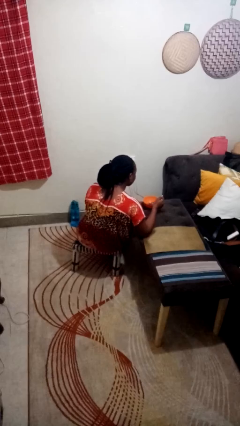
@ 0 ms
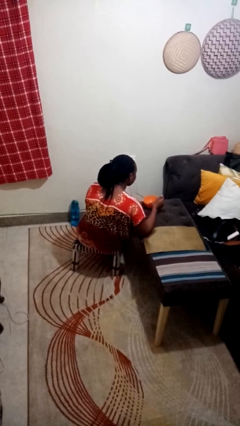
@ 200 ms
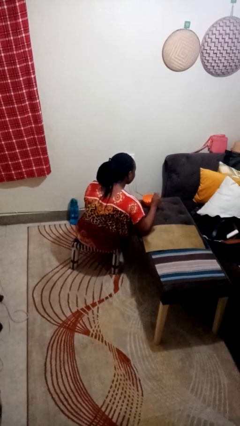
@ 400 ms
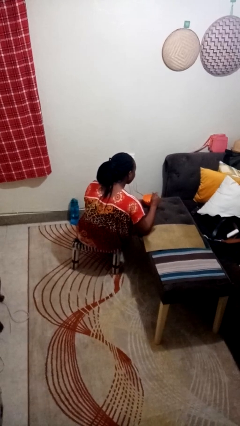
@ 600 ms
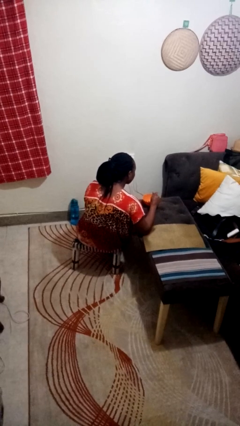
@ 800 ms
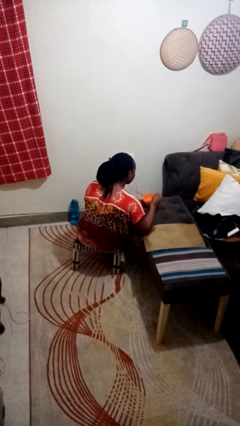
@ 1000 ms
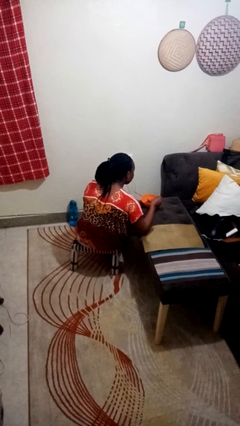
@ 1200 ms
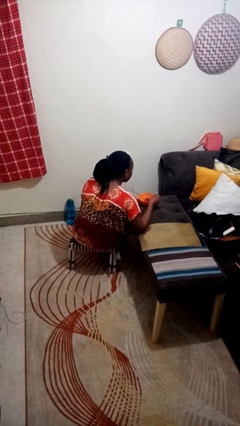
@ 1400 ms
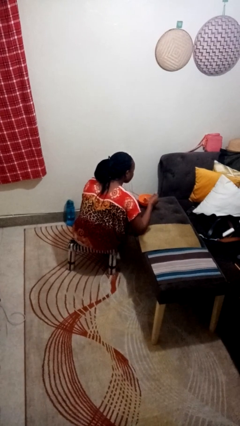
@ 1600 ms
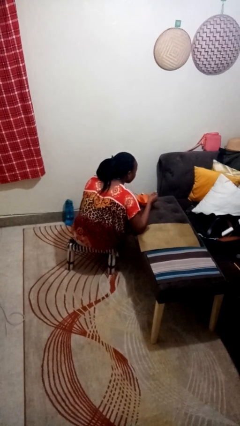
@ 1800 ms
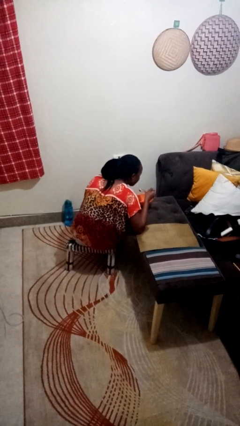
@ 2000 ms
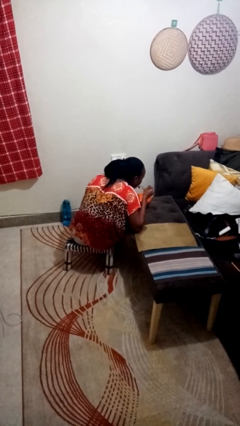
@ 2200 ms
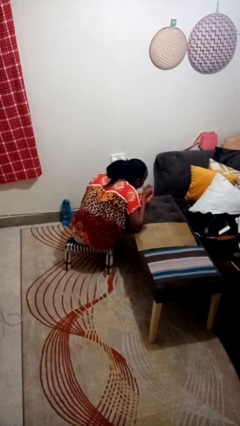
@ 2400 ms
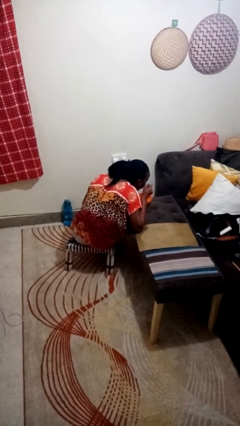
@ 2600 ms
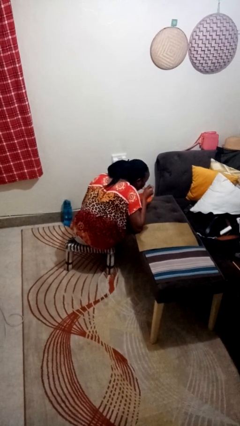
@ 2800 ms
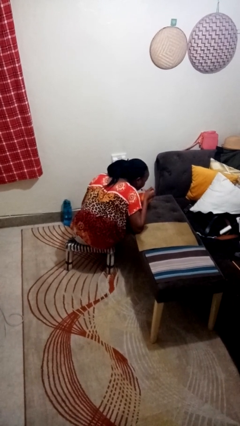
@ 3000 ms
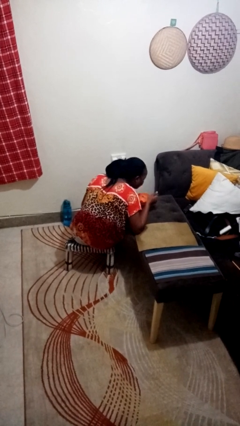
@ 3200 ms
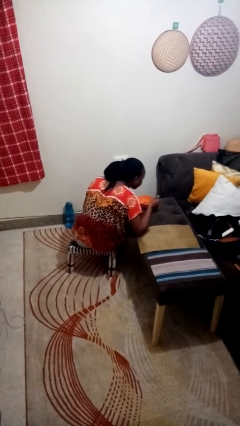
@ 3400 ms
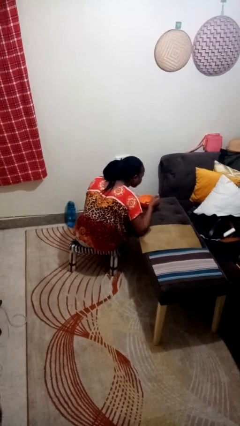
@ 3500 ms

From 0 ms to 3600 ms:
person eats with utensil

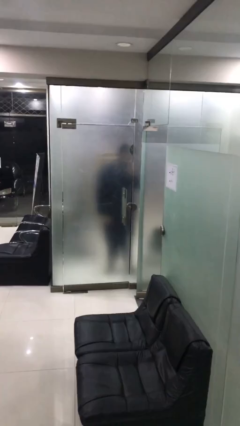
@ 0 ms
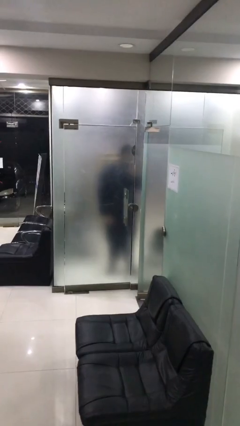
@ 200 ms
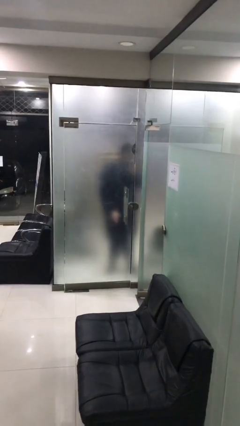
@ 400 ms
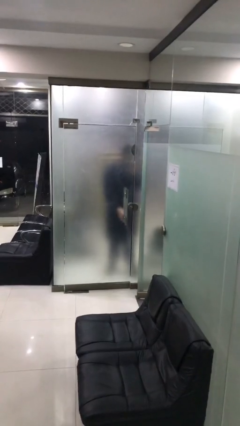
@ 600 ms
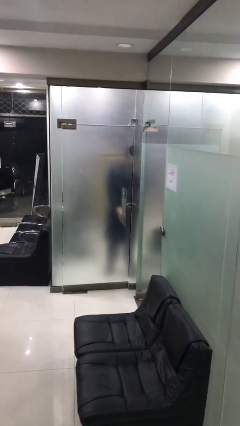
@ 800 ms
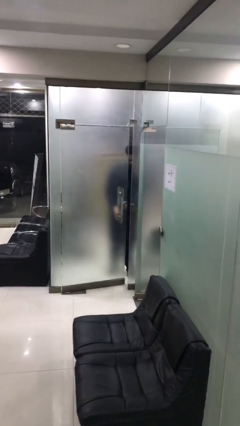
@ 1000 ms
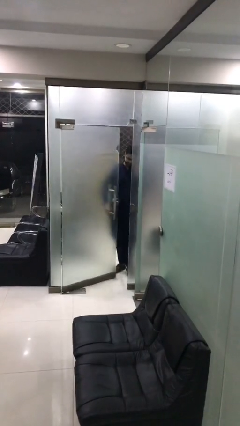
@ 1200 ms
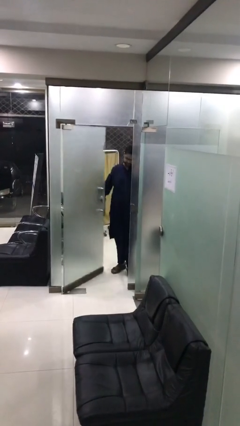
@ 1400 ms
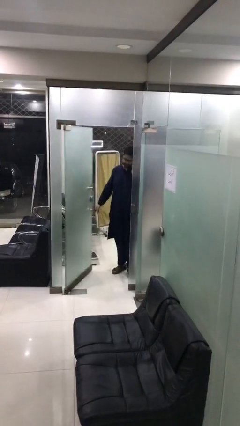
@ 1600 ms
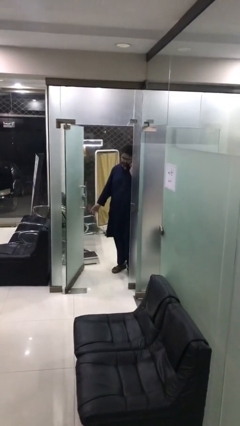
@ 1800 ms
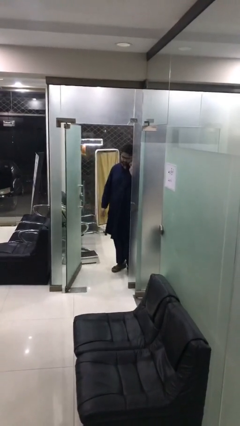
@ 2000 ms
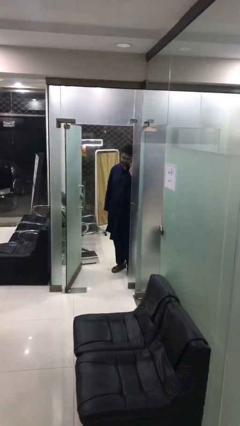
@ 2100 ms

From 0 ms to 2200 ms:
person opens facility door

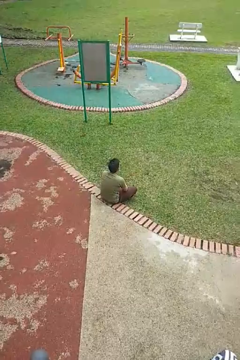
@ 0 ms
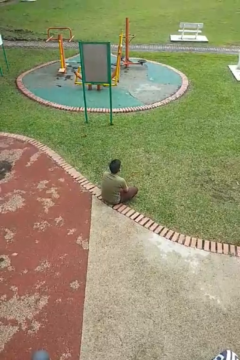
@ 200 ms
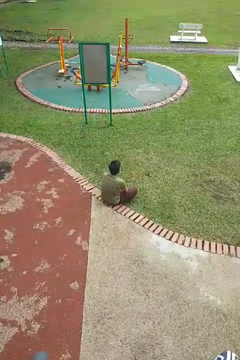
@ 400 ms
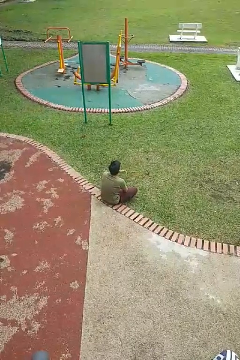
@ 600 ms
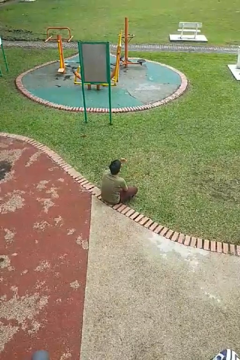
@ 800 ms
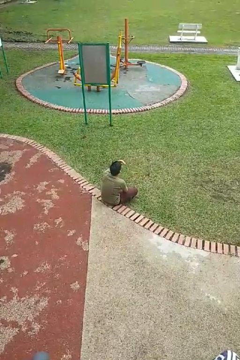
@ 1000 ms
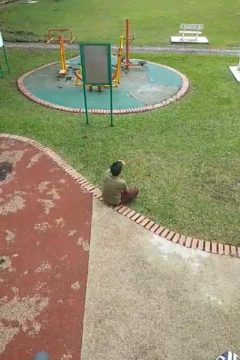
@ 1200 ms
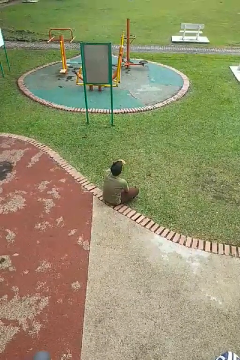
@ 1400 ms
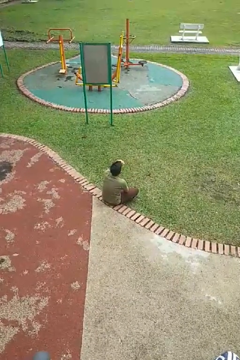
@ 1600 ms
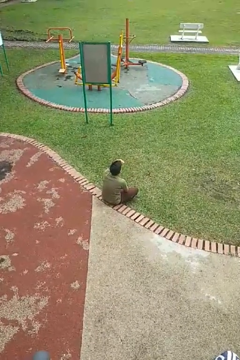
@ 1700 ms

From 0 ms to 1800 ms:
person shades eyes

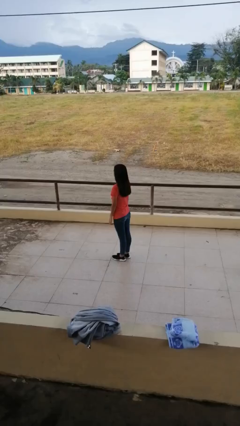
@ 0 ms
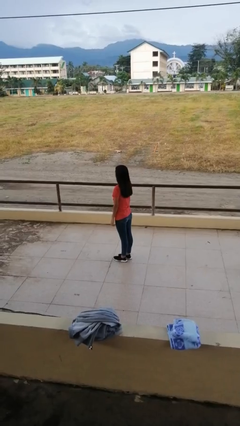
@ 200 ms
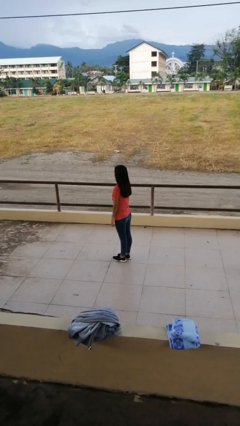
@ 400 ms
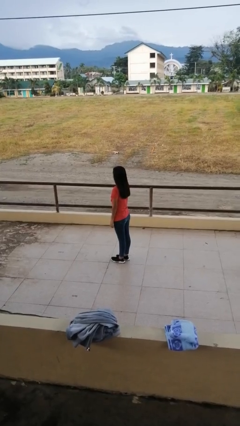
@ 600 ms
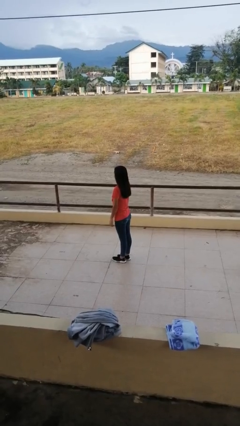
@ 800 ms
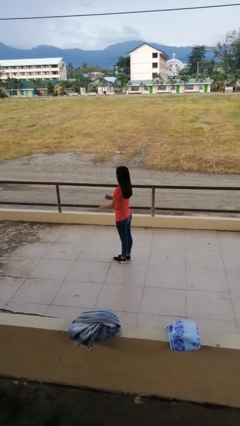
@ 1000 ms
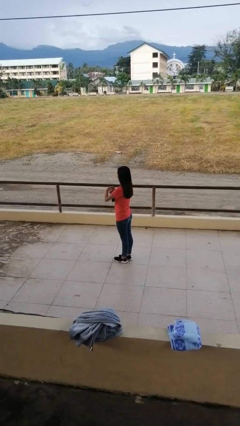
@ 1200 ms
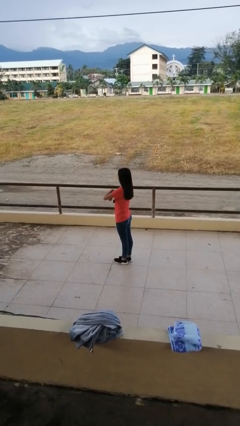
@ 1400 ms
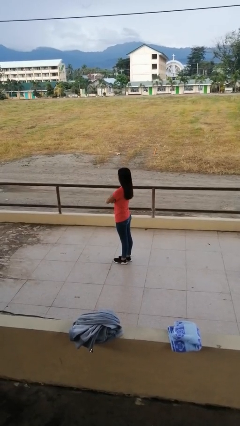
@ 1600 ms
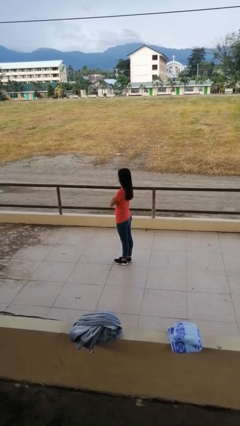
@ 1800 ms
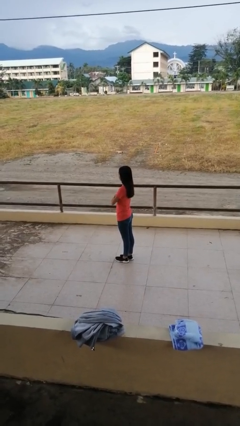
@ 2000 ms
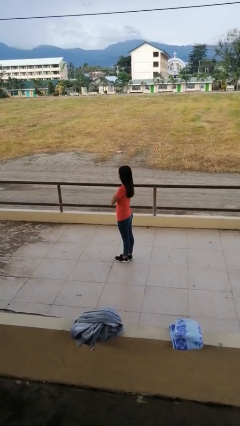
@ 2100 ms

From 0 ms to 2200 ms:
person crosses arms

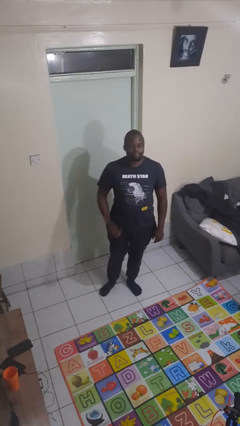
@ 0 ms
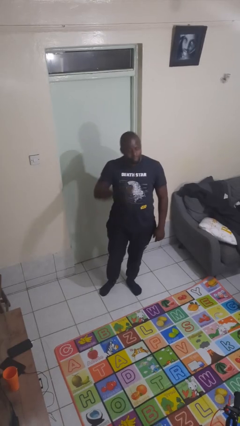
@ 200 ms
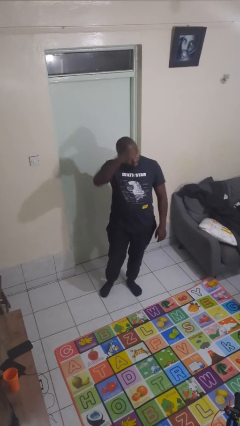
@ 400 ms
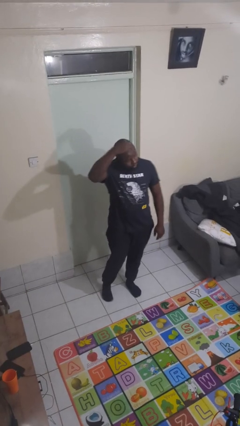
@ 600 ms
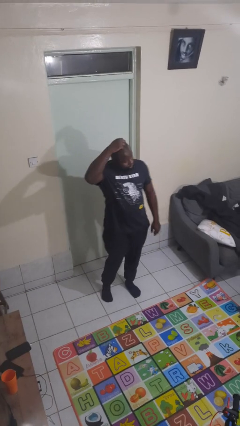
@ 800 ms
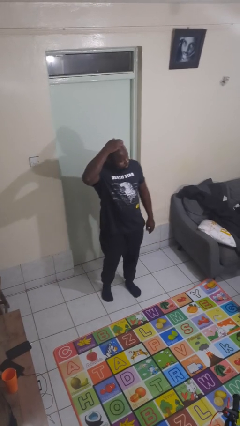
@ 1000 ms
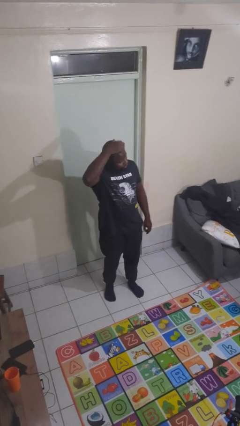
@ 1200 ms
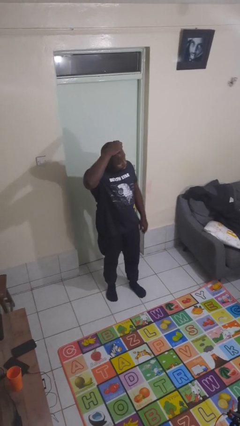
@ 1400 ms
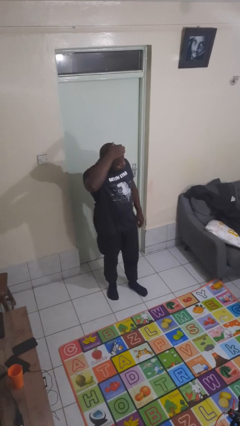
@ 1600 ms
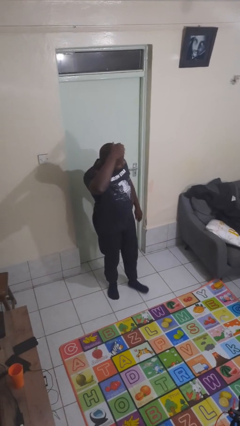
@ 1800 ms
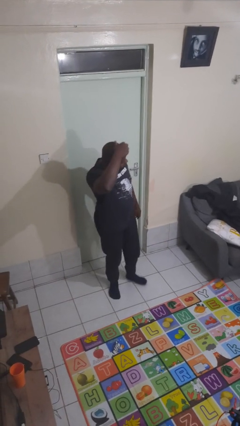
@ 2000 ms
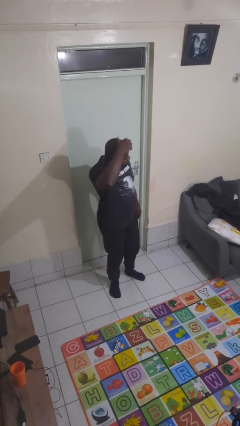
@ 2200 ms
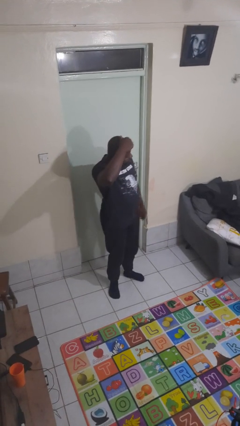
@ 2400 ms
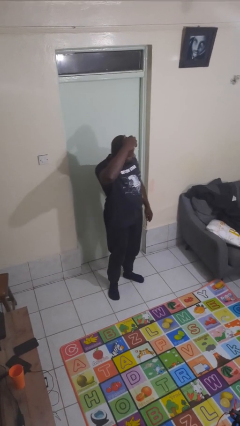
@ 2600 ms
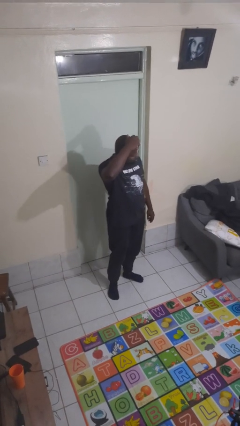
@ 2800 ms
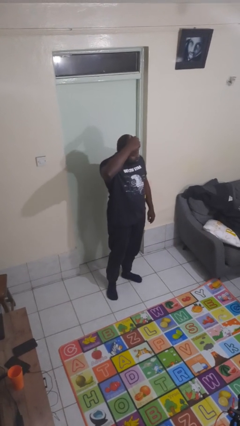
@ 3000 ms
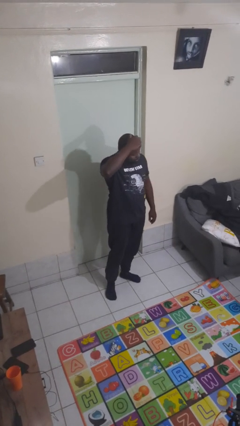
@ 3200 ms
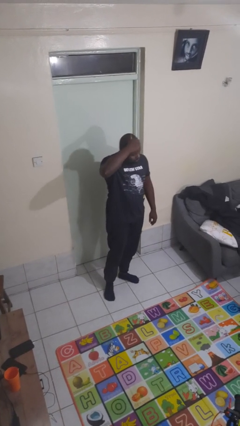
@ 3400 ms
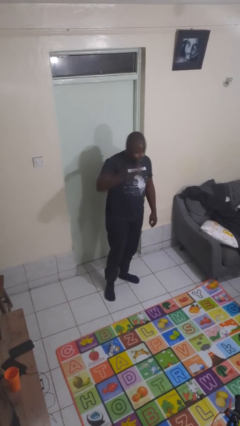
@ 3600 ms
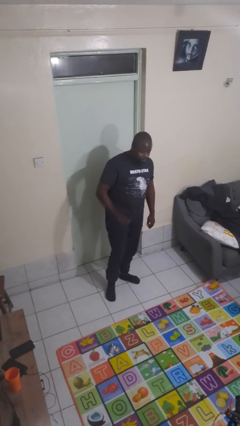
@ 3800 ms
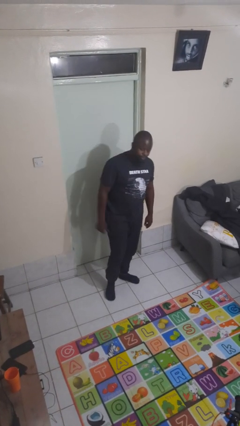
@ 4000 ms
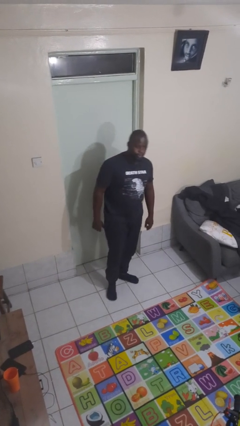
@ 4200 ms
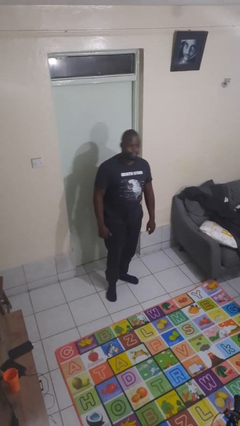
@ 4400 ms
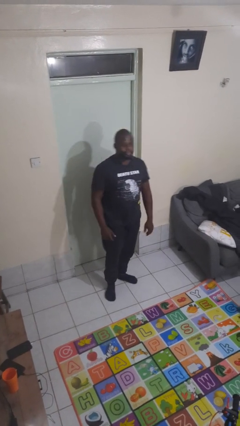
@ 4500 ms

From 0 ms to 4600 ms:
person scratches face

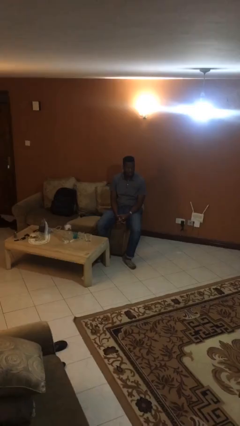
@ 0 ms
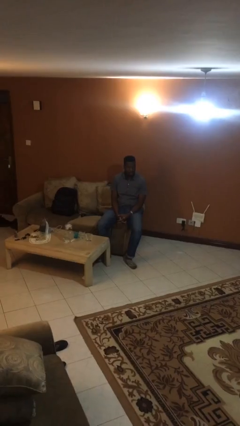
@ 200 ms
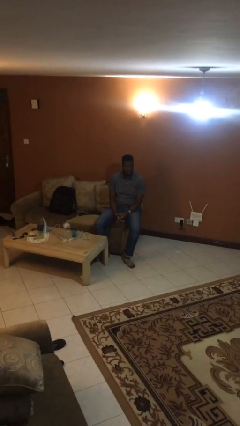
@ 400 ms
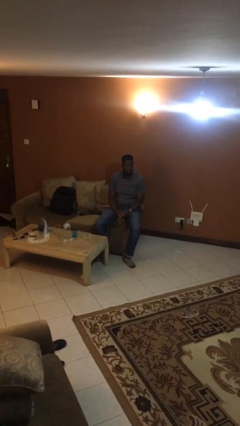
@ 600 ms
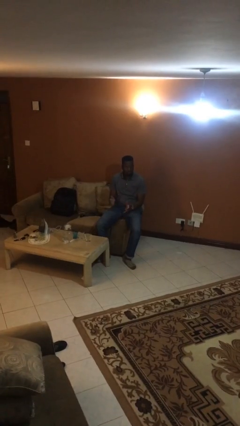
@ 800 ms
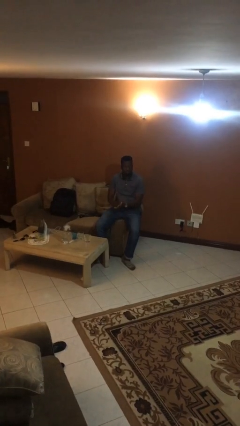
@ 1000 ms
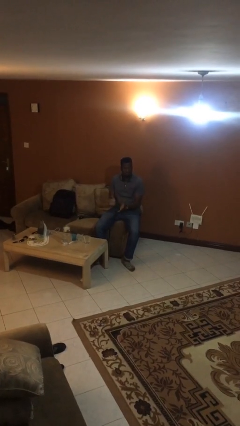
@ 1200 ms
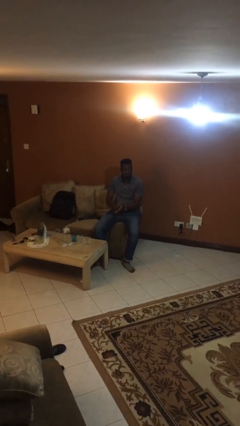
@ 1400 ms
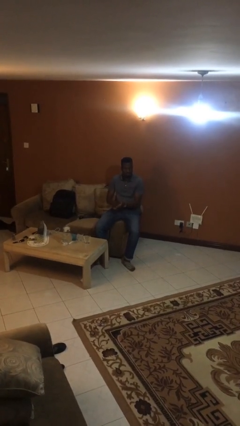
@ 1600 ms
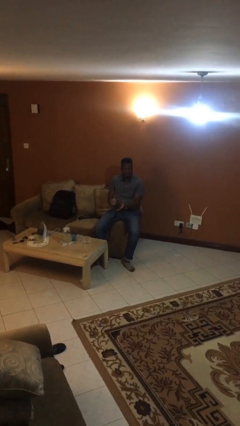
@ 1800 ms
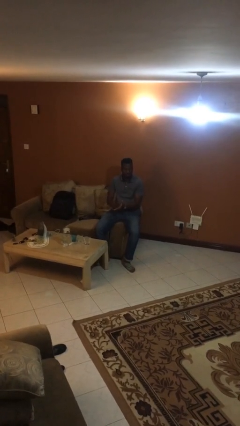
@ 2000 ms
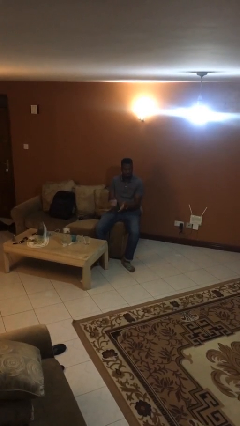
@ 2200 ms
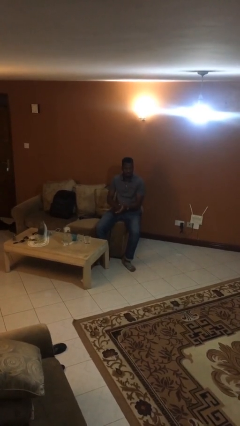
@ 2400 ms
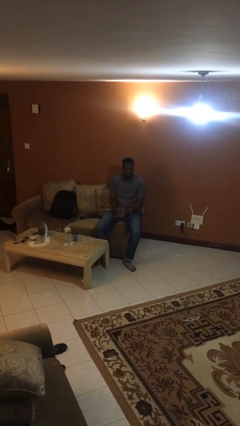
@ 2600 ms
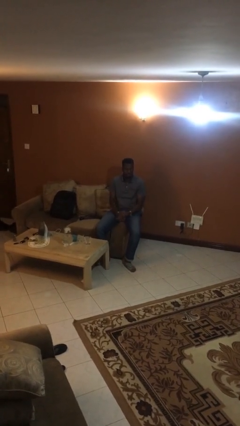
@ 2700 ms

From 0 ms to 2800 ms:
person claps hands

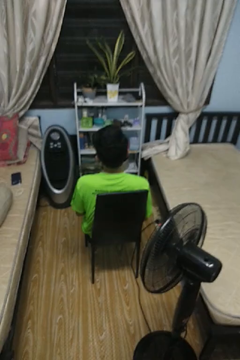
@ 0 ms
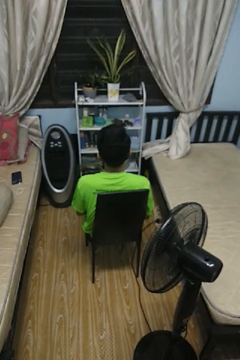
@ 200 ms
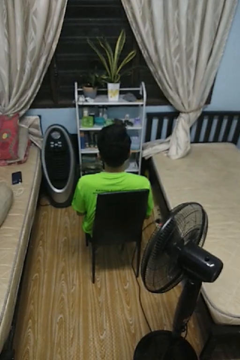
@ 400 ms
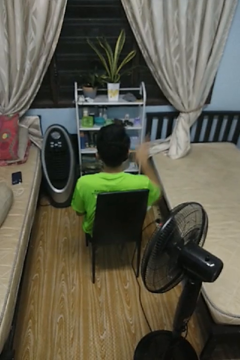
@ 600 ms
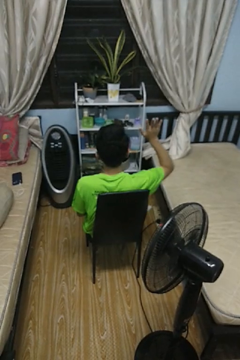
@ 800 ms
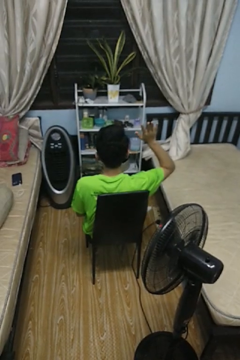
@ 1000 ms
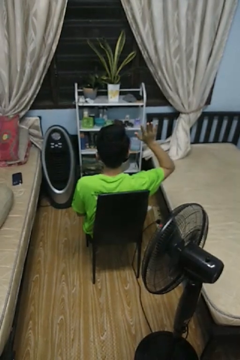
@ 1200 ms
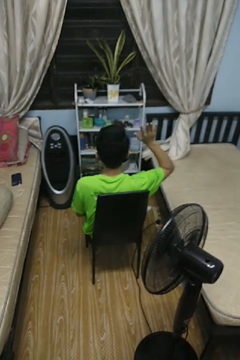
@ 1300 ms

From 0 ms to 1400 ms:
person gestures number five
